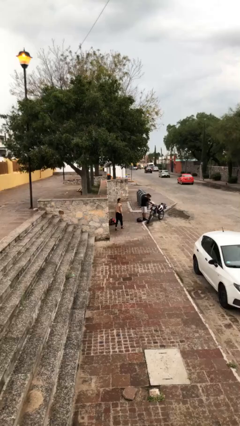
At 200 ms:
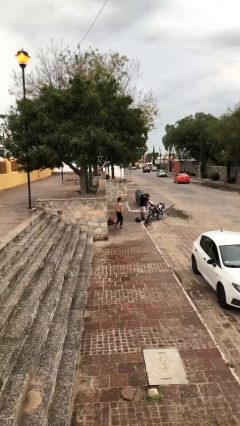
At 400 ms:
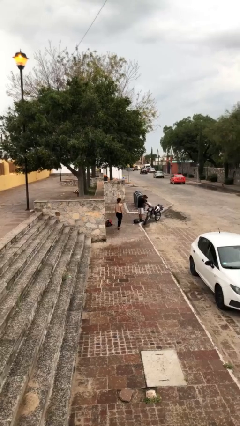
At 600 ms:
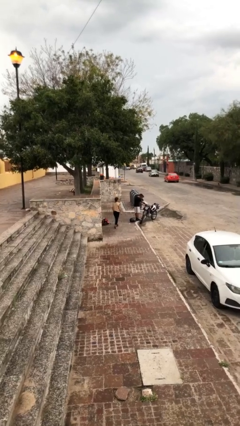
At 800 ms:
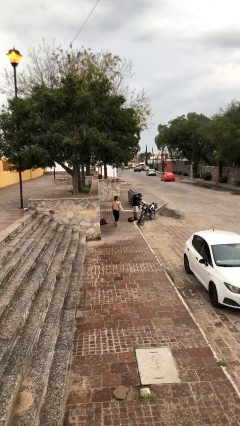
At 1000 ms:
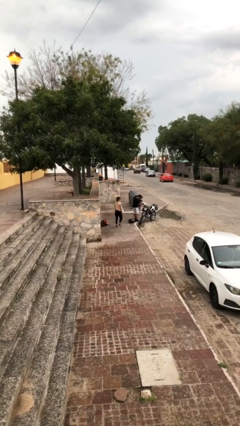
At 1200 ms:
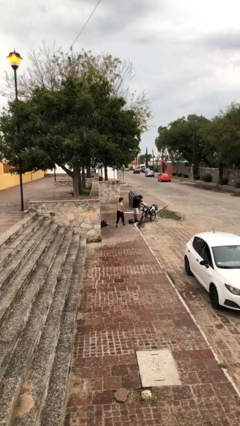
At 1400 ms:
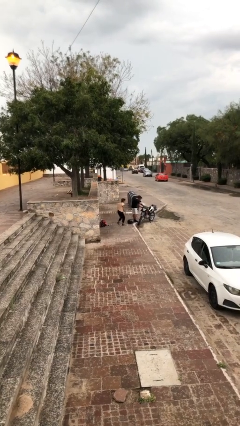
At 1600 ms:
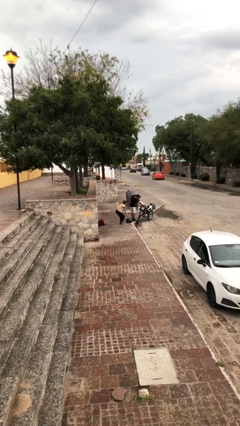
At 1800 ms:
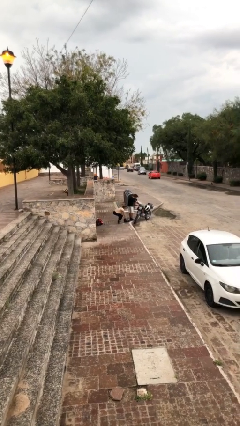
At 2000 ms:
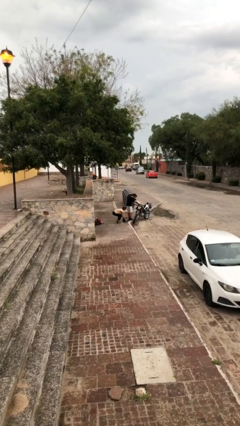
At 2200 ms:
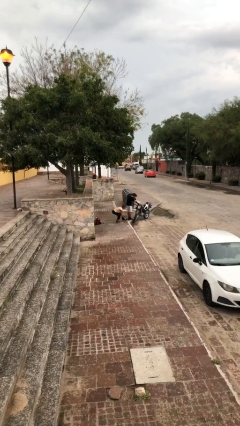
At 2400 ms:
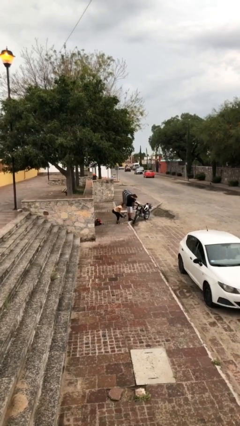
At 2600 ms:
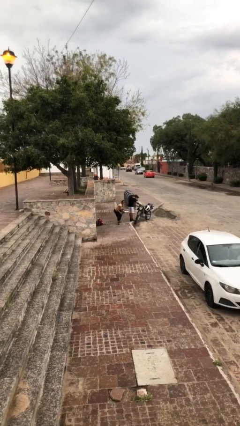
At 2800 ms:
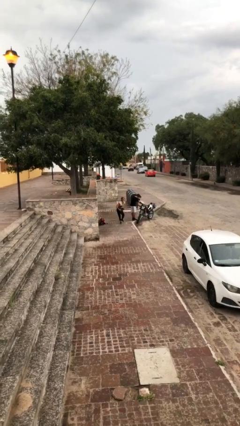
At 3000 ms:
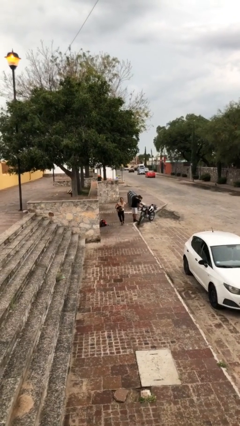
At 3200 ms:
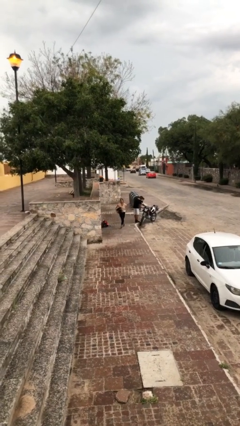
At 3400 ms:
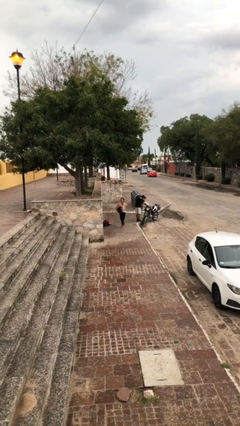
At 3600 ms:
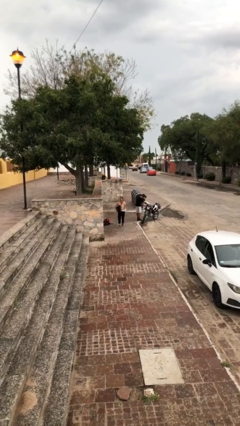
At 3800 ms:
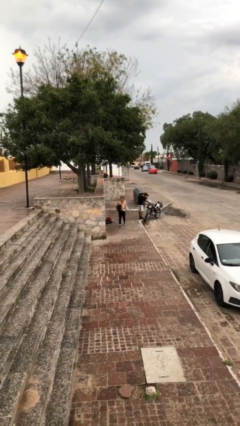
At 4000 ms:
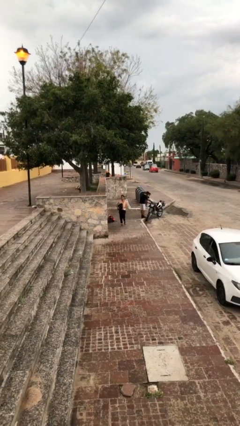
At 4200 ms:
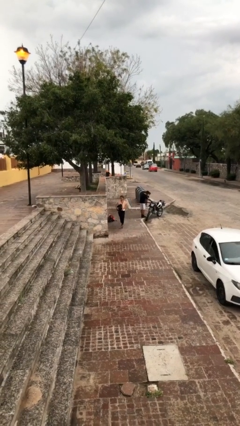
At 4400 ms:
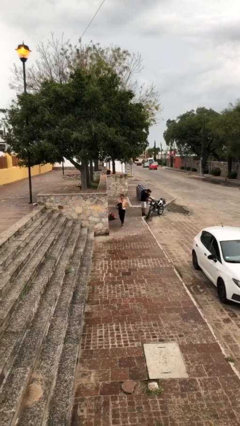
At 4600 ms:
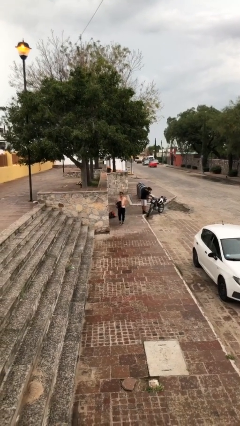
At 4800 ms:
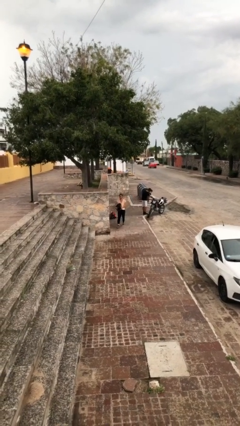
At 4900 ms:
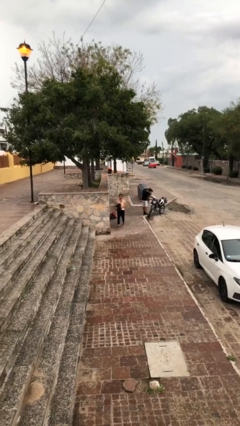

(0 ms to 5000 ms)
person steals object from person

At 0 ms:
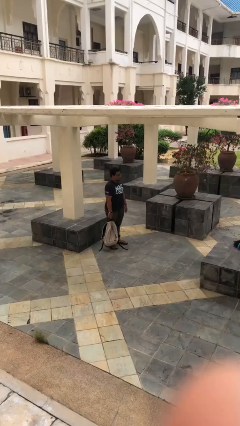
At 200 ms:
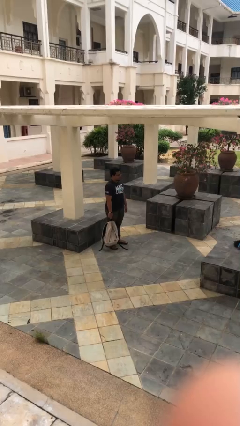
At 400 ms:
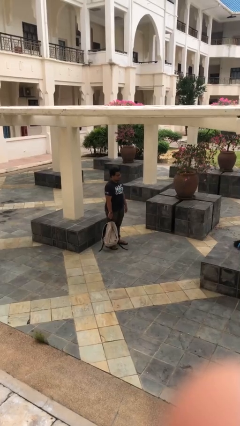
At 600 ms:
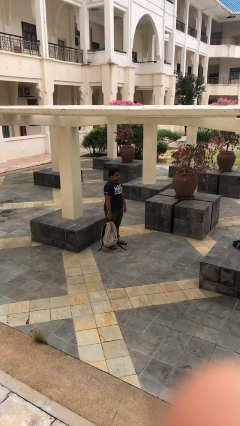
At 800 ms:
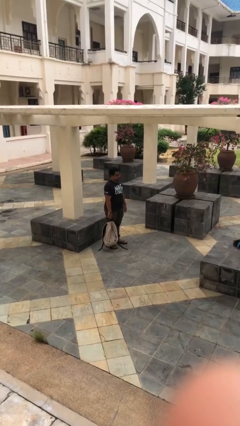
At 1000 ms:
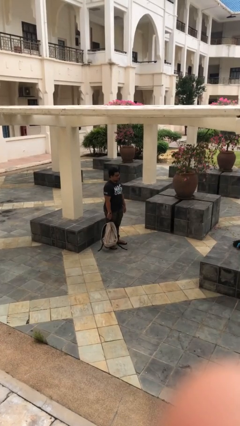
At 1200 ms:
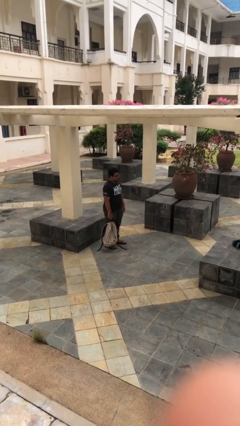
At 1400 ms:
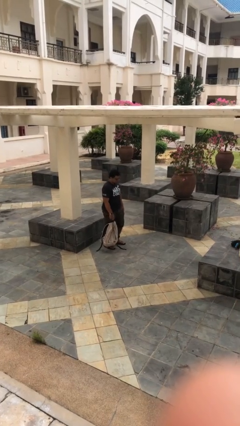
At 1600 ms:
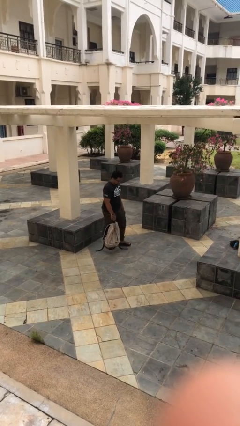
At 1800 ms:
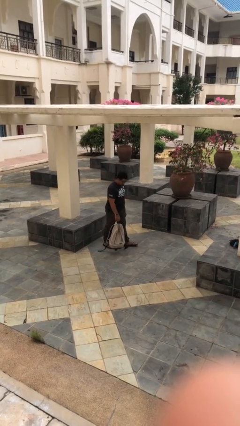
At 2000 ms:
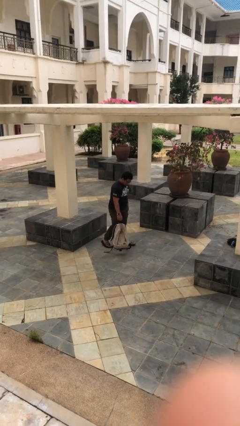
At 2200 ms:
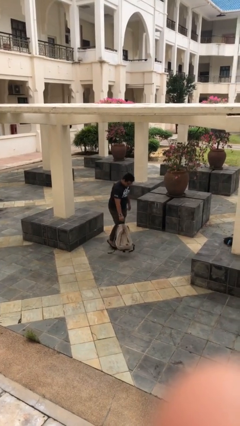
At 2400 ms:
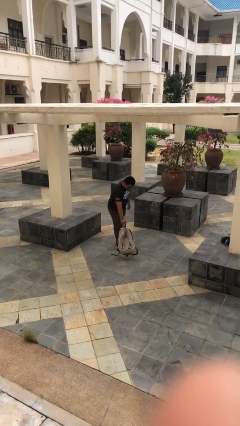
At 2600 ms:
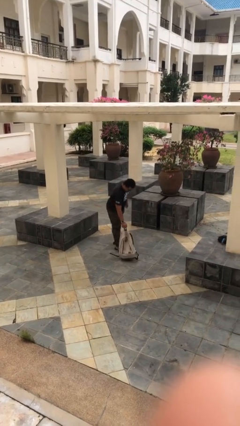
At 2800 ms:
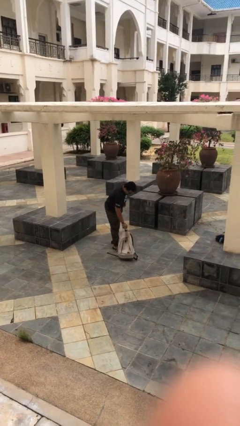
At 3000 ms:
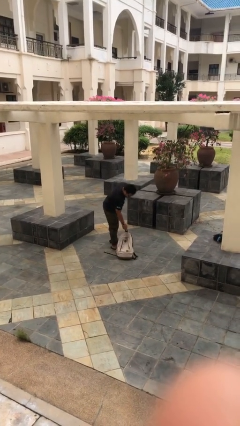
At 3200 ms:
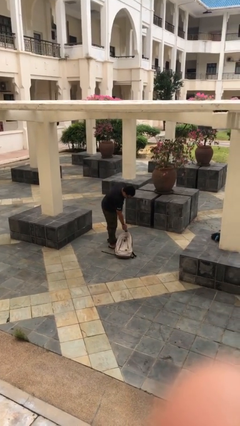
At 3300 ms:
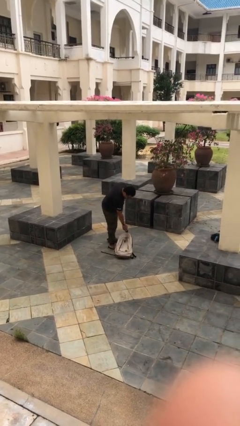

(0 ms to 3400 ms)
person puts down object on floor

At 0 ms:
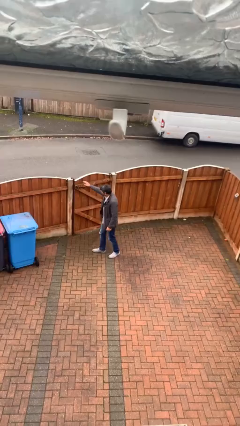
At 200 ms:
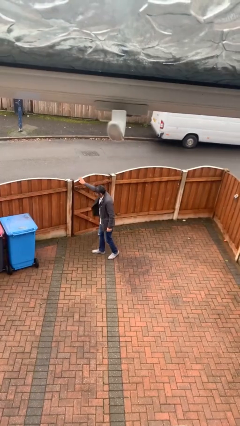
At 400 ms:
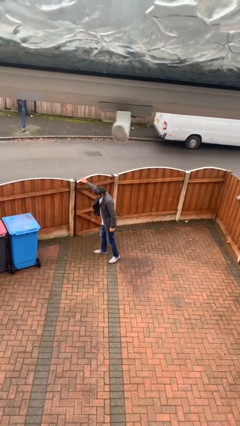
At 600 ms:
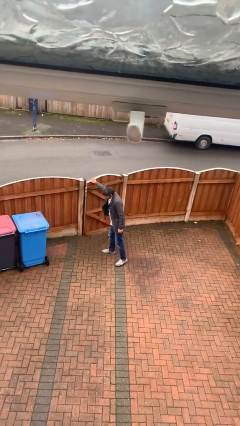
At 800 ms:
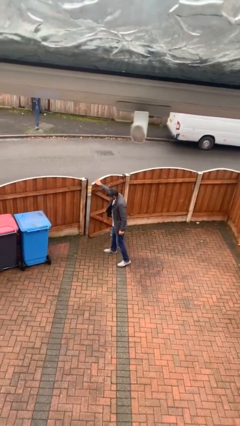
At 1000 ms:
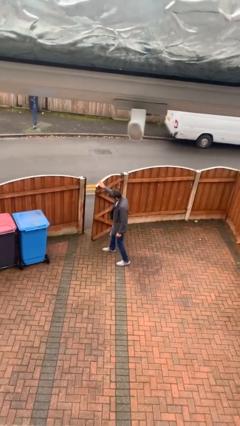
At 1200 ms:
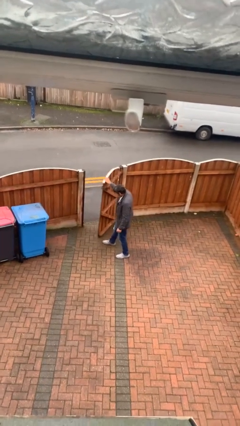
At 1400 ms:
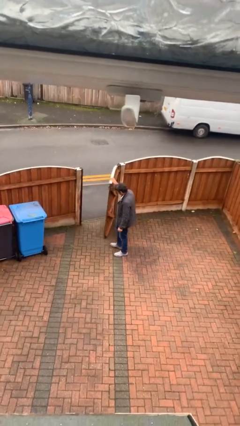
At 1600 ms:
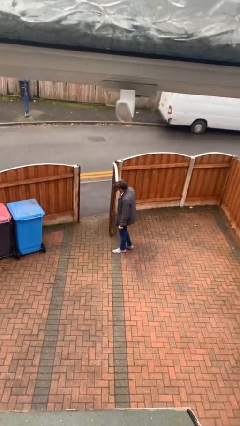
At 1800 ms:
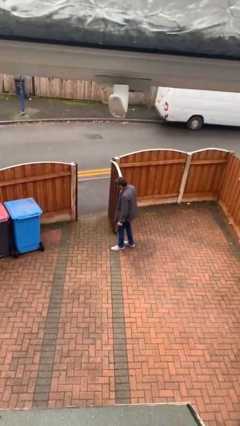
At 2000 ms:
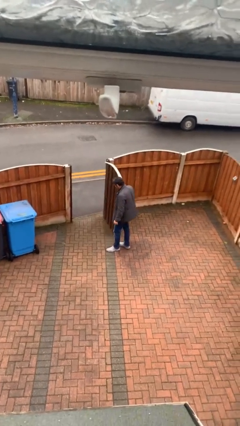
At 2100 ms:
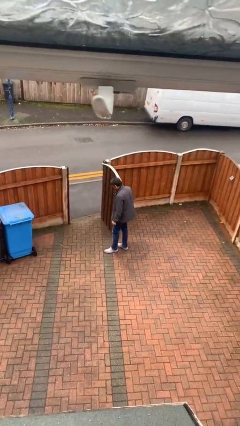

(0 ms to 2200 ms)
person opens facility door

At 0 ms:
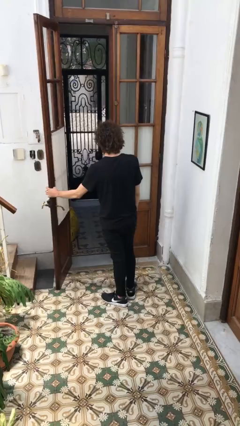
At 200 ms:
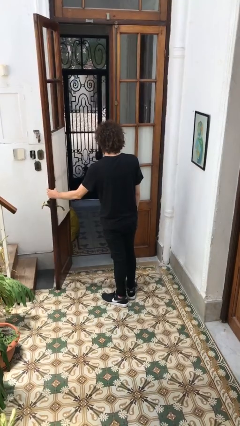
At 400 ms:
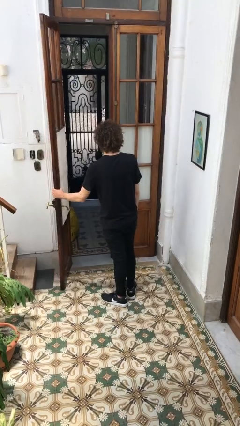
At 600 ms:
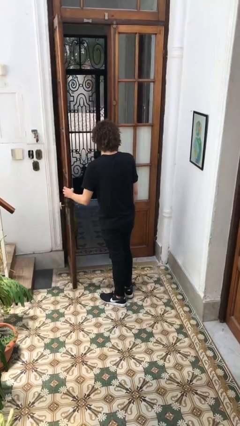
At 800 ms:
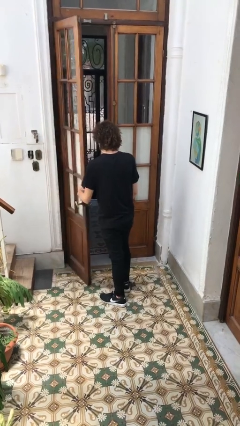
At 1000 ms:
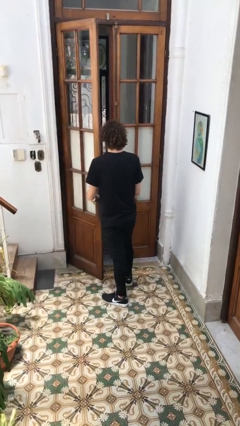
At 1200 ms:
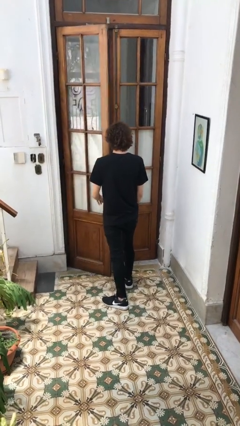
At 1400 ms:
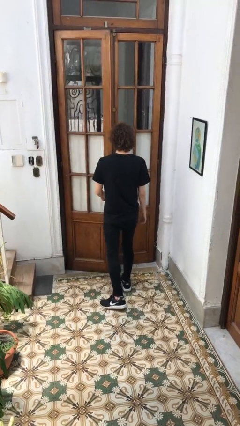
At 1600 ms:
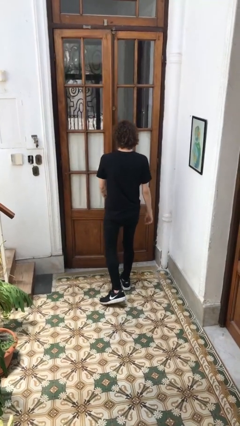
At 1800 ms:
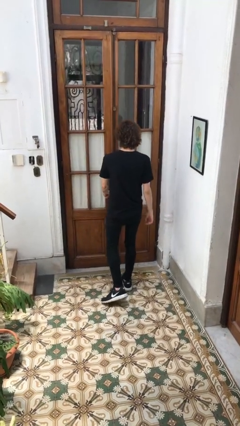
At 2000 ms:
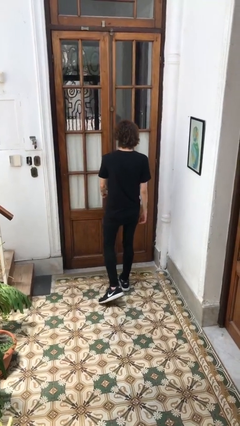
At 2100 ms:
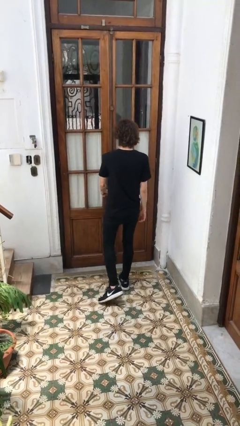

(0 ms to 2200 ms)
person closes facility door

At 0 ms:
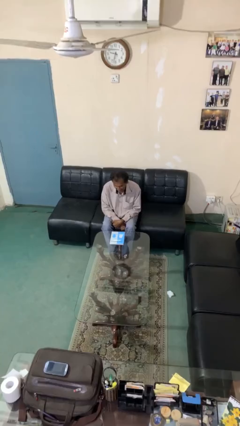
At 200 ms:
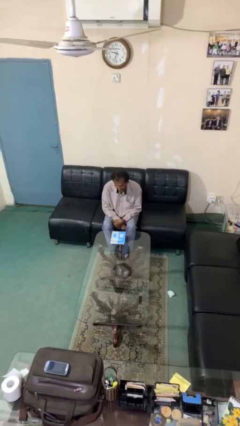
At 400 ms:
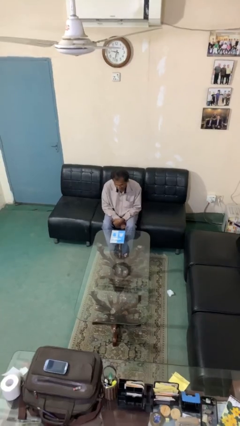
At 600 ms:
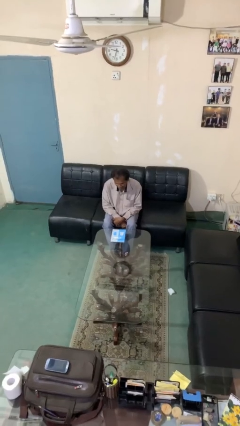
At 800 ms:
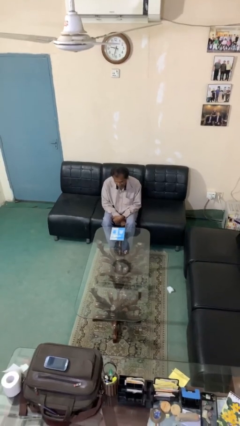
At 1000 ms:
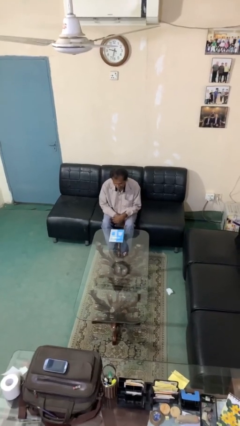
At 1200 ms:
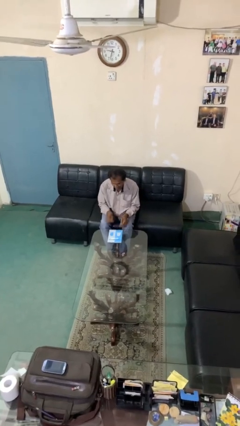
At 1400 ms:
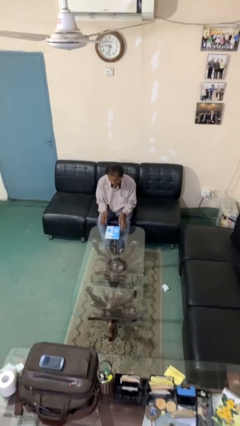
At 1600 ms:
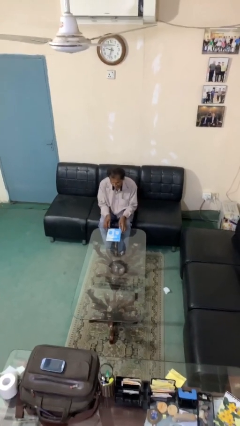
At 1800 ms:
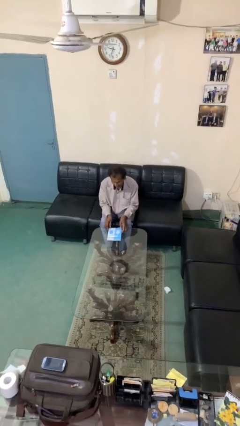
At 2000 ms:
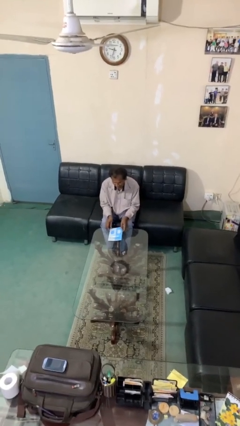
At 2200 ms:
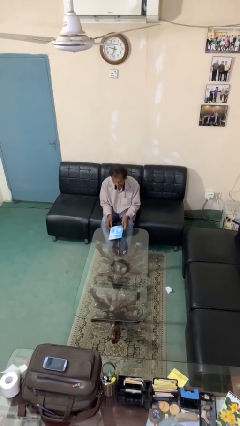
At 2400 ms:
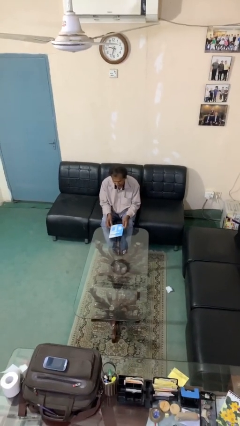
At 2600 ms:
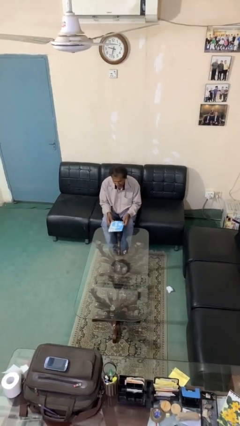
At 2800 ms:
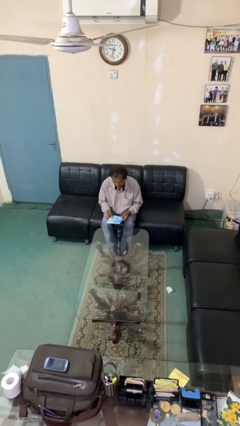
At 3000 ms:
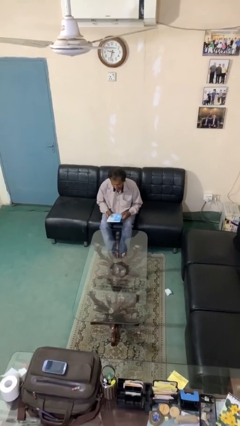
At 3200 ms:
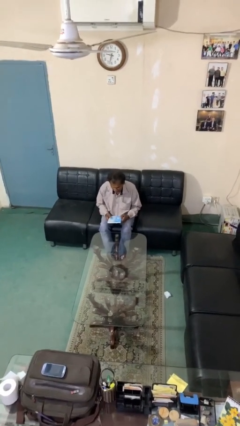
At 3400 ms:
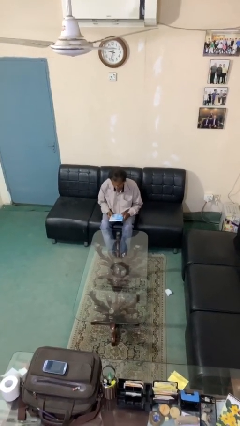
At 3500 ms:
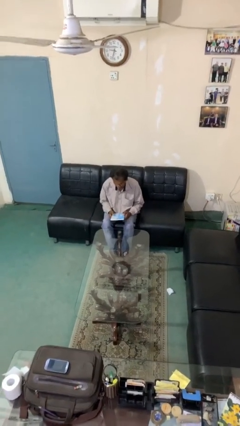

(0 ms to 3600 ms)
person picks up object from table

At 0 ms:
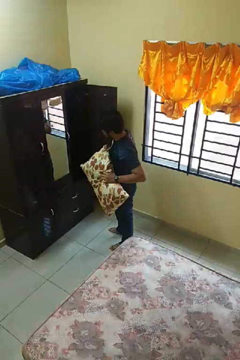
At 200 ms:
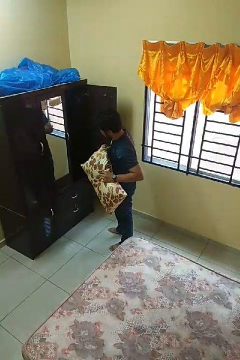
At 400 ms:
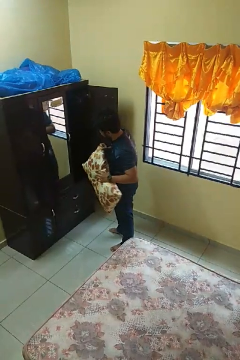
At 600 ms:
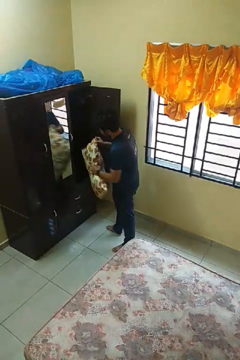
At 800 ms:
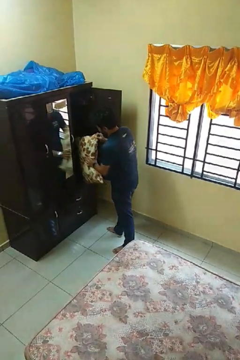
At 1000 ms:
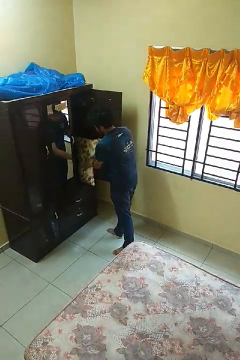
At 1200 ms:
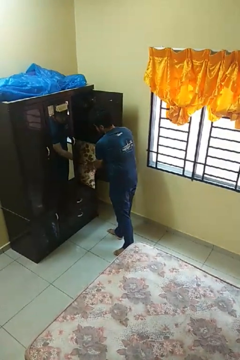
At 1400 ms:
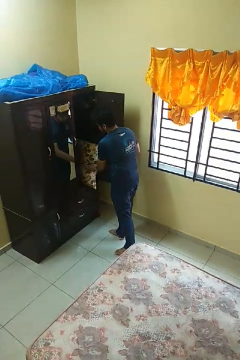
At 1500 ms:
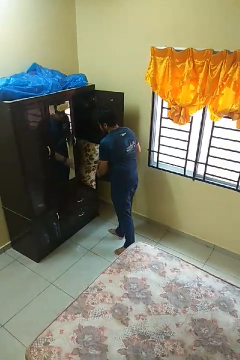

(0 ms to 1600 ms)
person puts down object into cabinet
